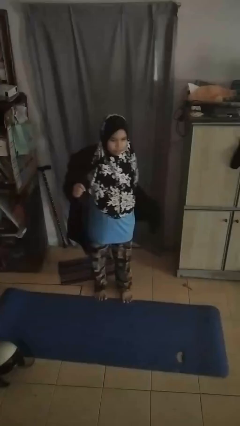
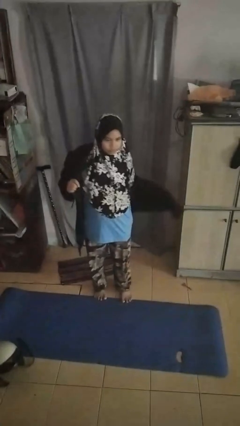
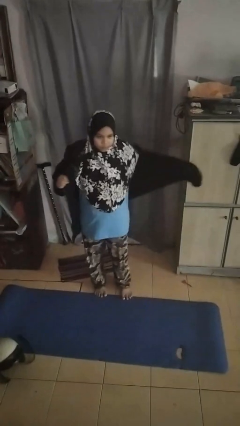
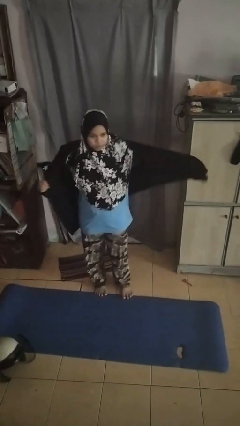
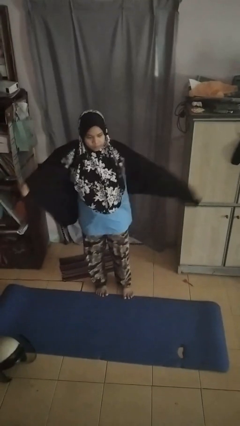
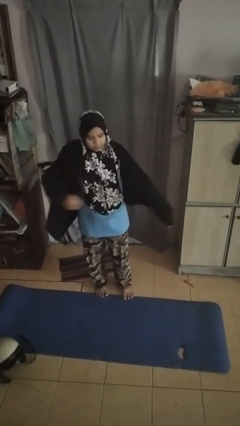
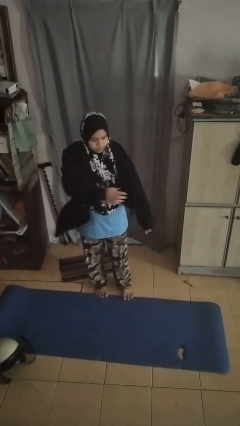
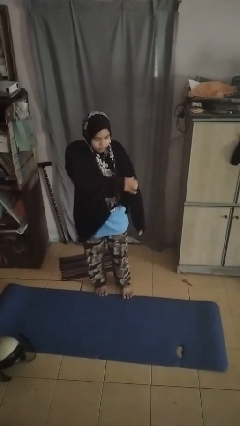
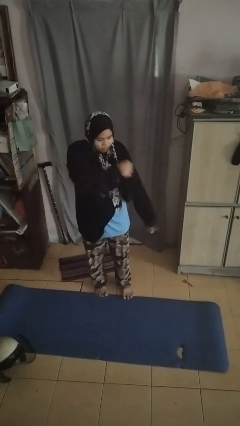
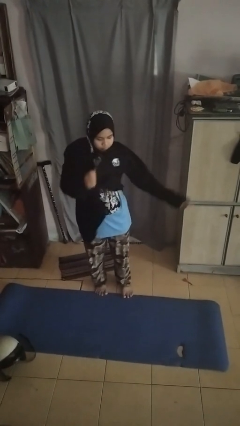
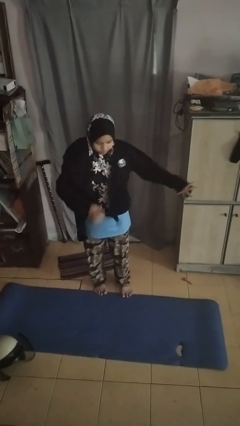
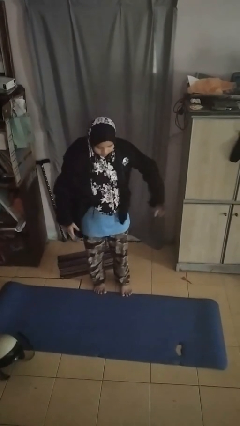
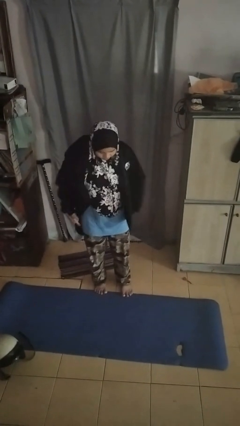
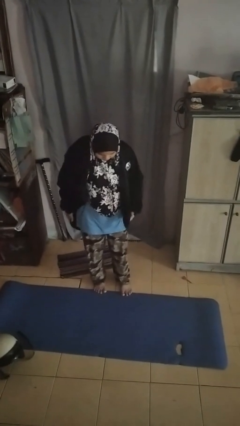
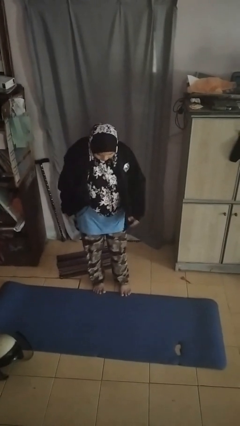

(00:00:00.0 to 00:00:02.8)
person puts on jacket

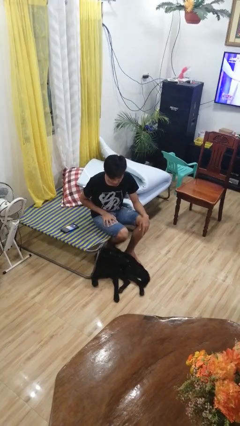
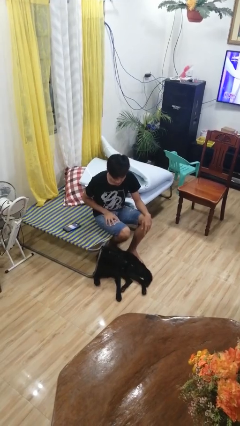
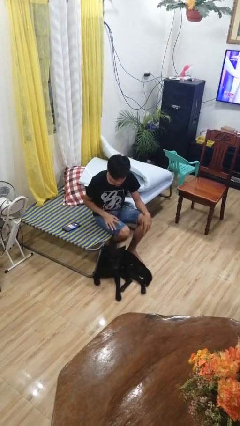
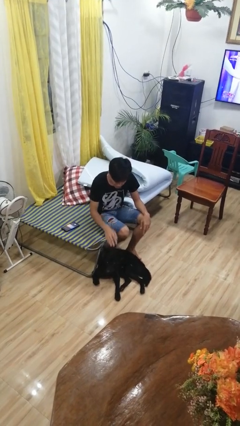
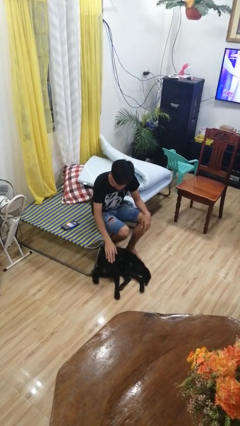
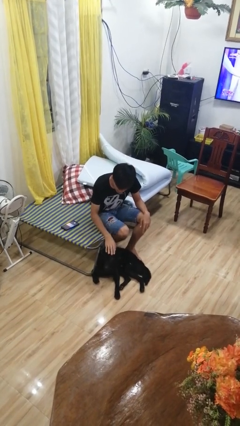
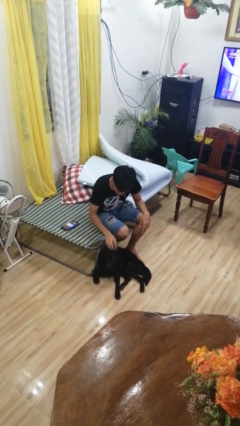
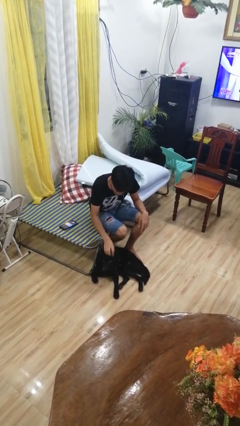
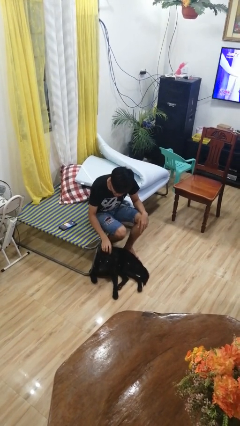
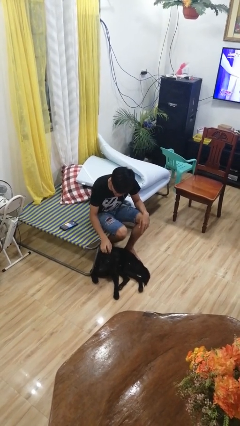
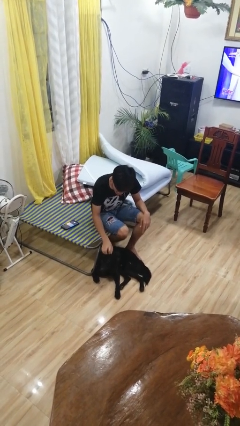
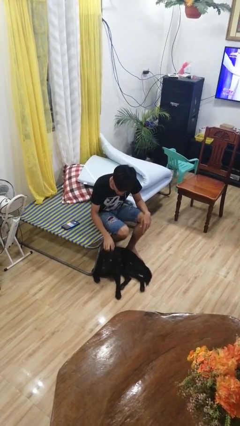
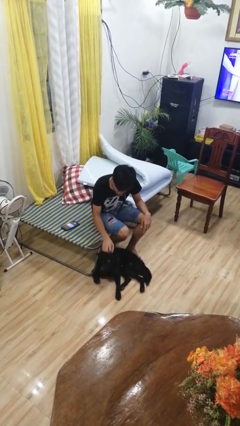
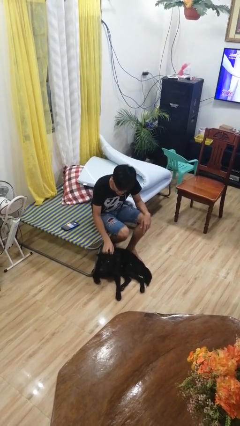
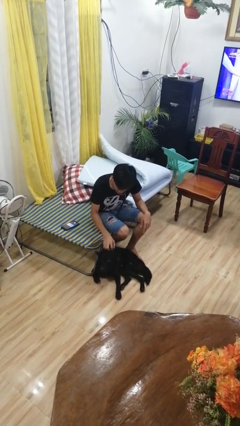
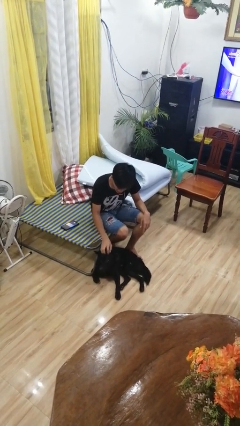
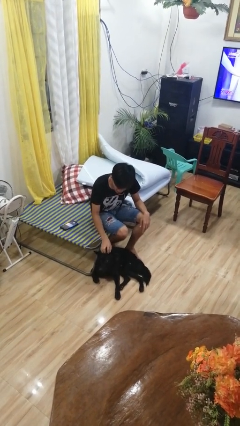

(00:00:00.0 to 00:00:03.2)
person pets dog

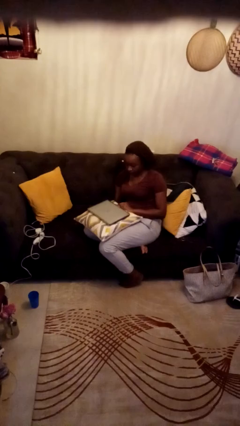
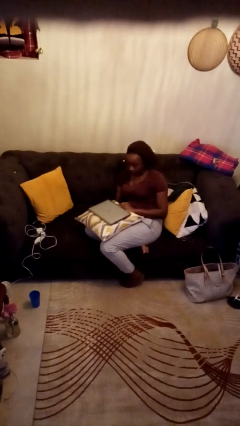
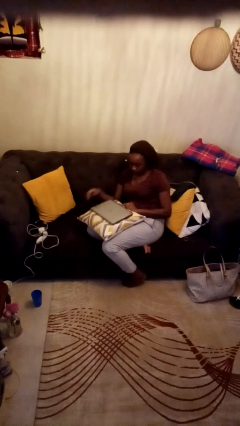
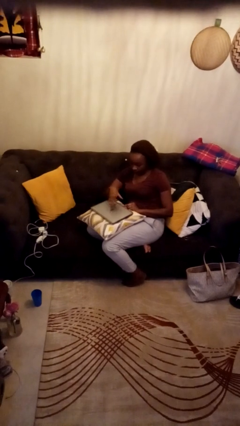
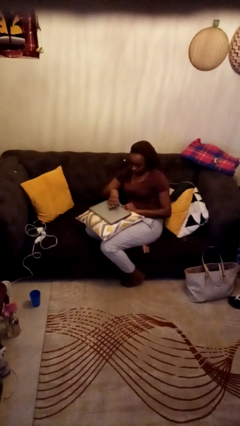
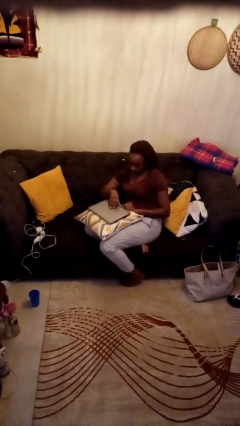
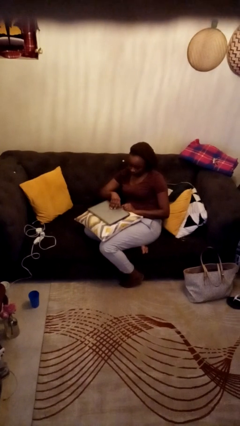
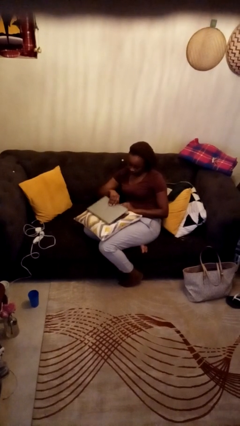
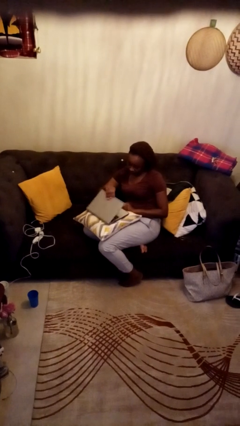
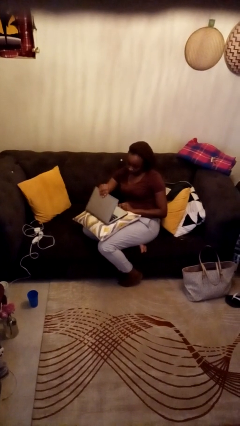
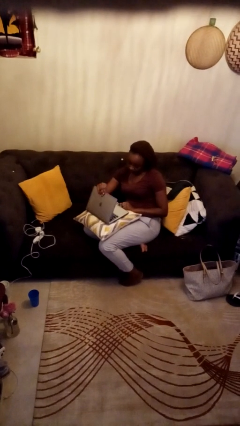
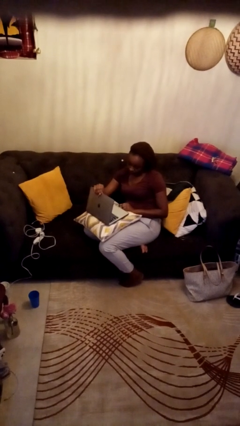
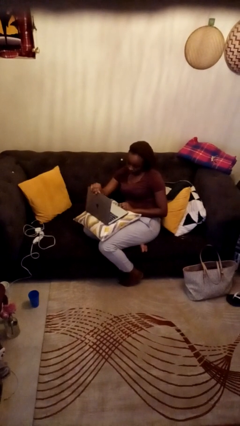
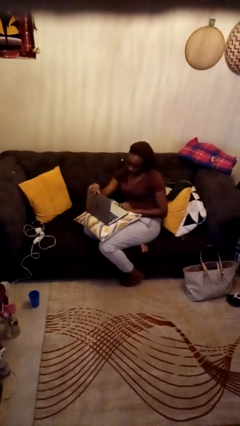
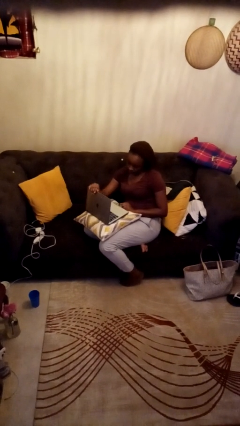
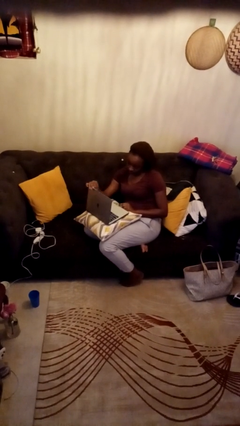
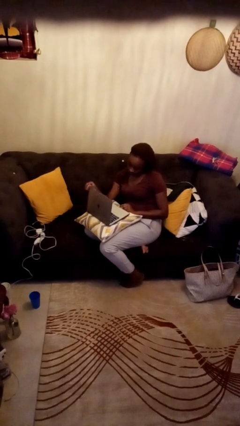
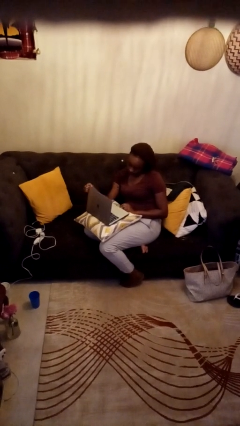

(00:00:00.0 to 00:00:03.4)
person opens laptop

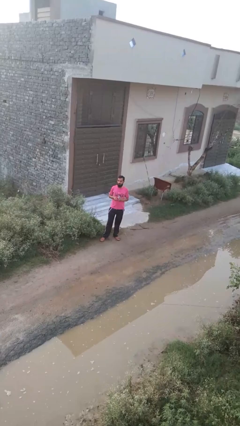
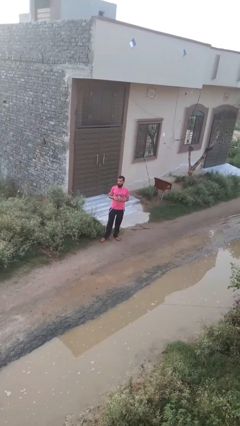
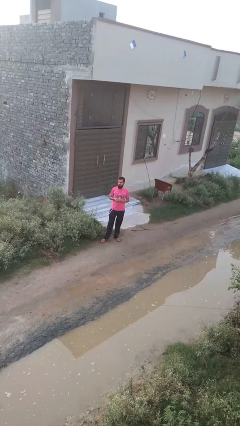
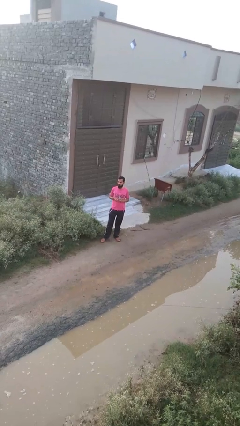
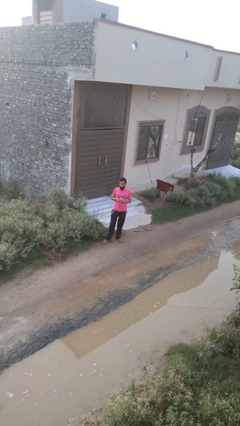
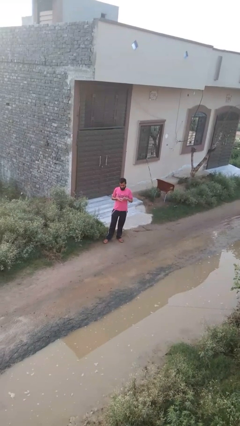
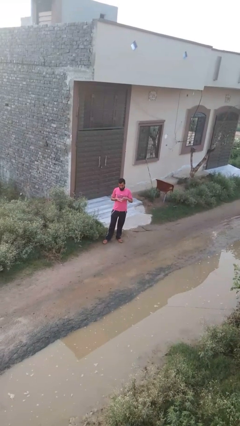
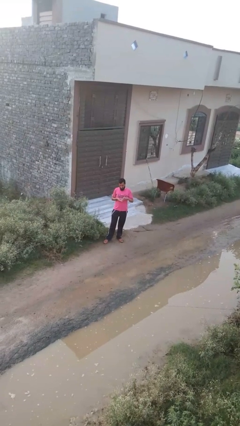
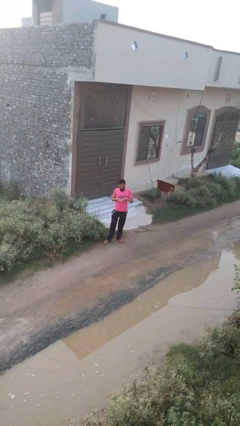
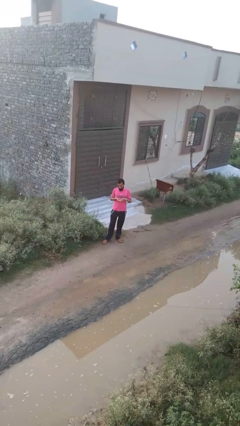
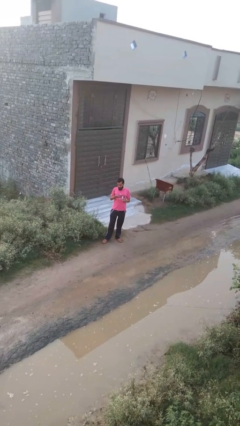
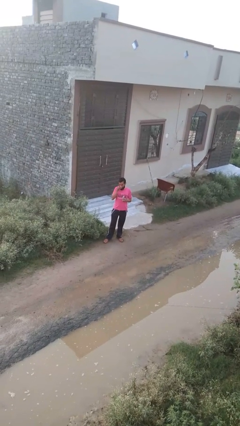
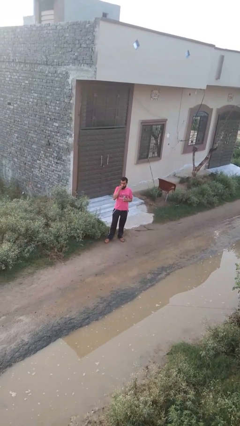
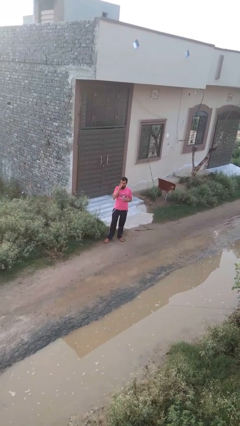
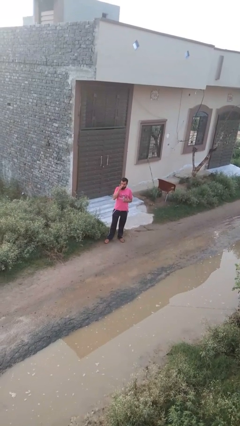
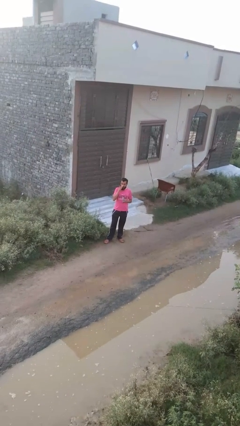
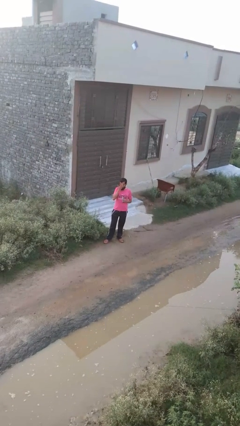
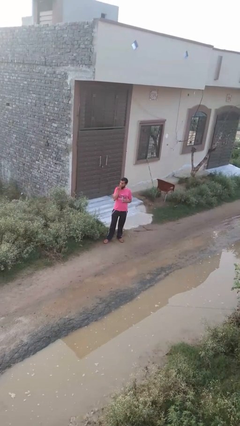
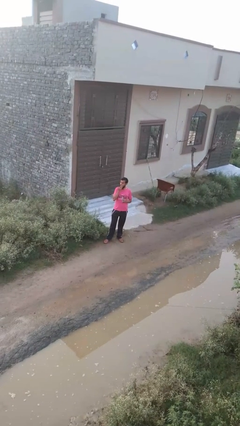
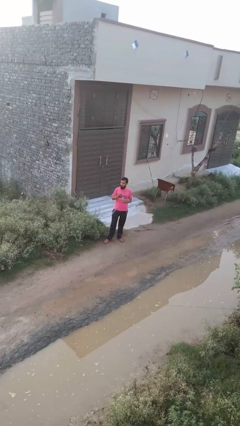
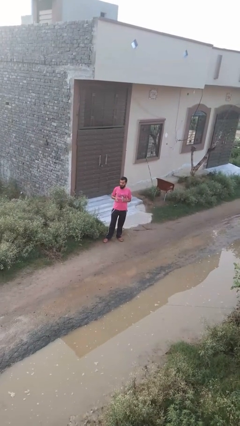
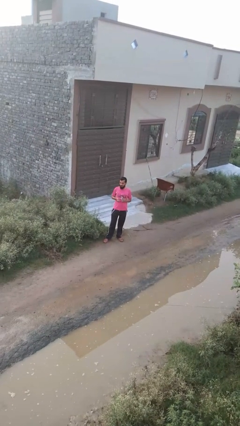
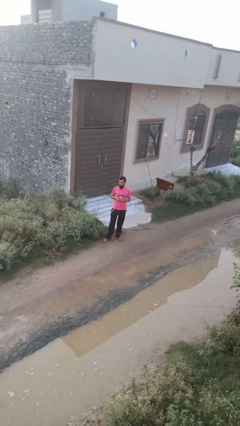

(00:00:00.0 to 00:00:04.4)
person applies facial moisturizer

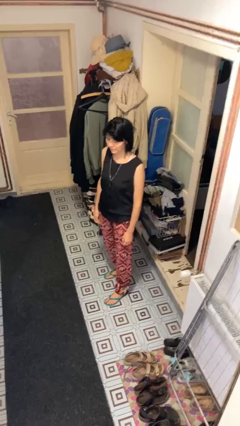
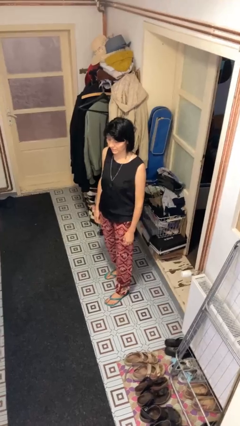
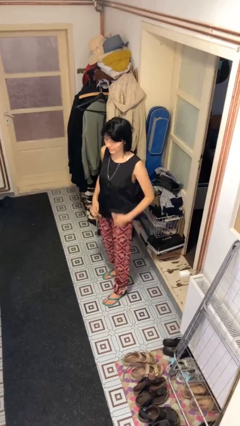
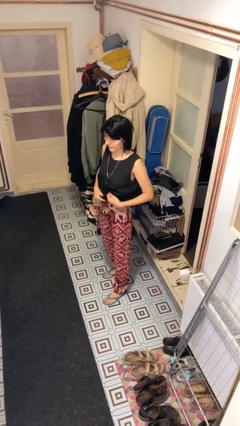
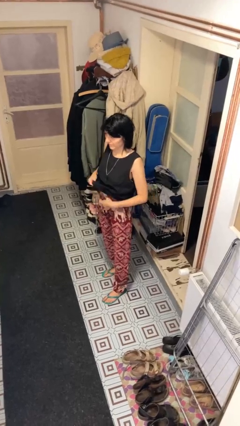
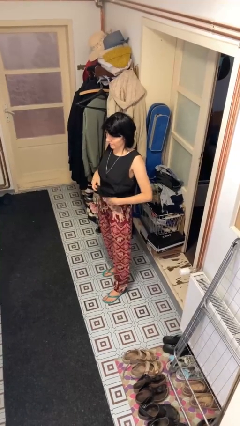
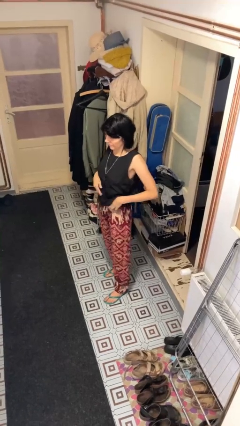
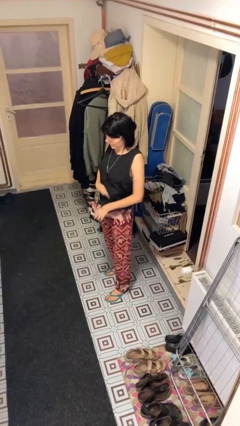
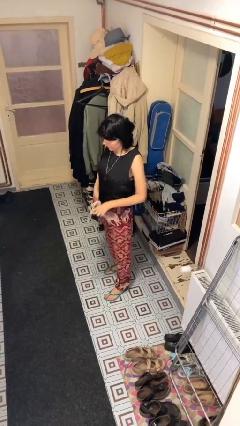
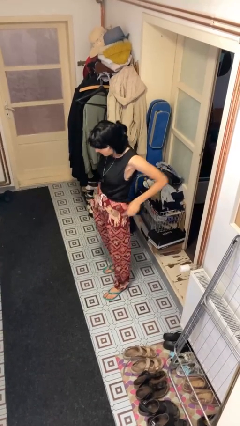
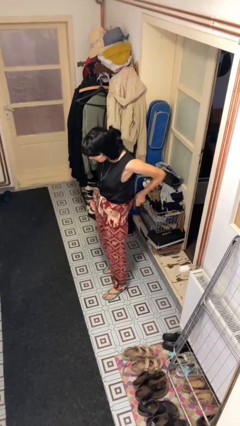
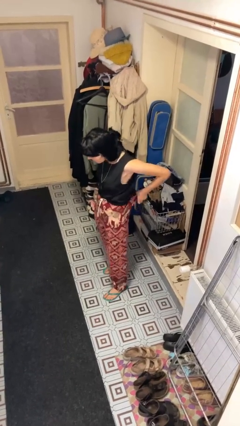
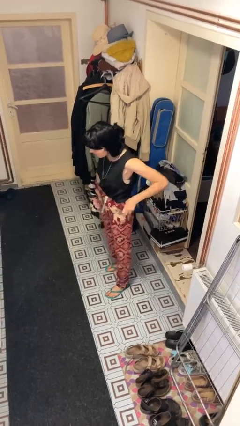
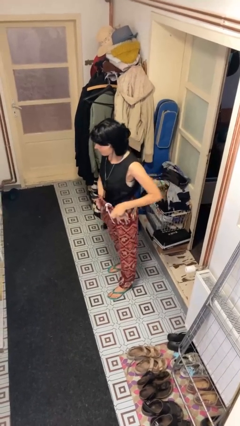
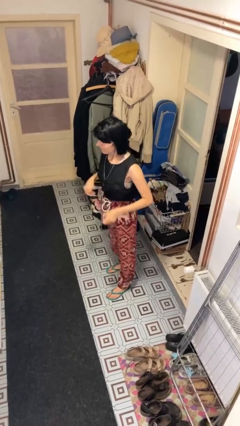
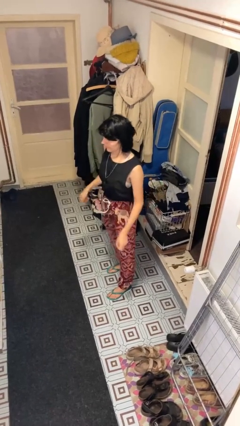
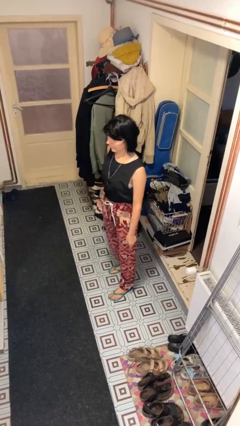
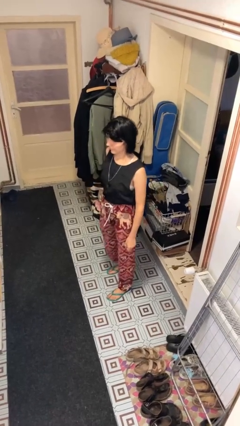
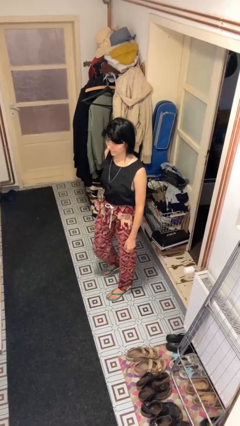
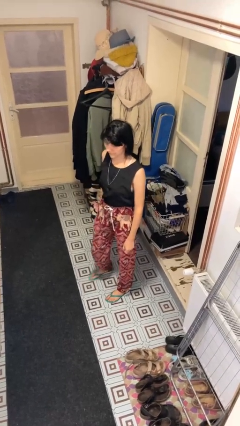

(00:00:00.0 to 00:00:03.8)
person tucks in shirt
